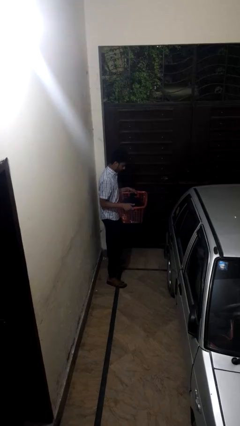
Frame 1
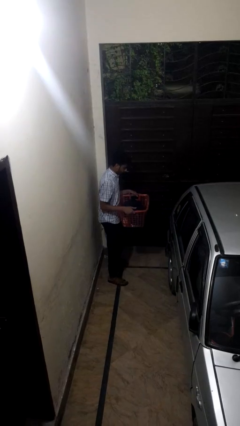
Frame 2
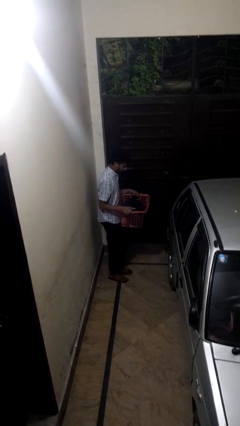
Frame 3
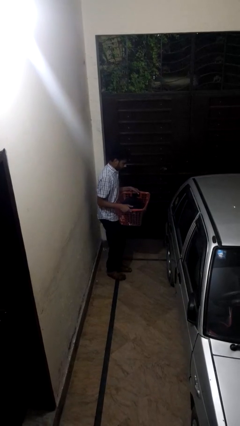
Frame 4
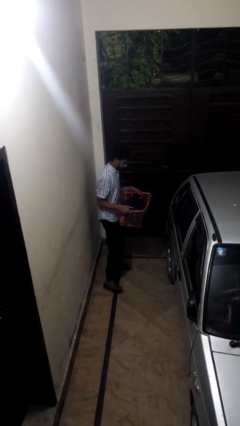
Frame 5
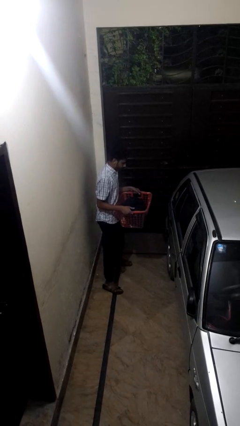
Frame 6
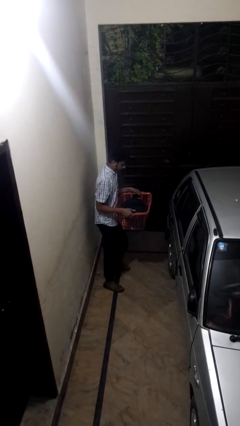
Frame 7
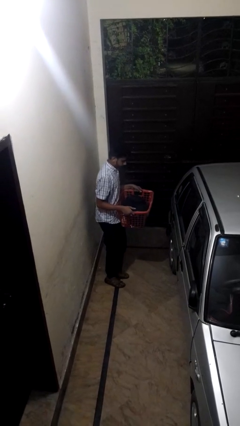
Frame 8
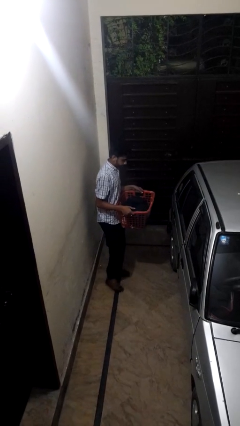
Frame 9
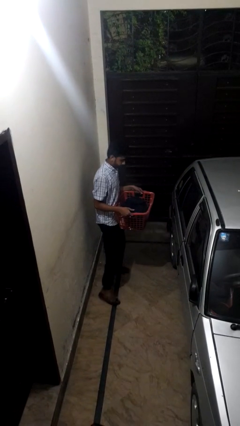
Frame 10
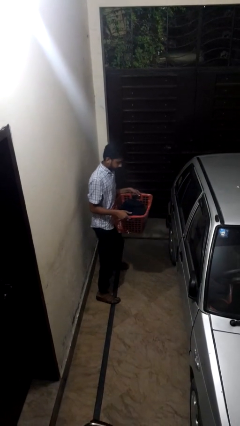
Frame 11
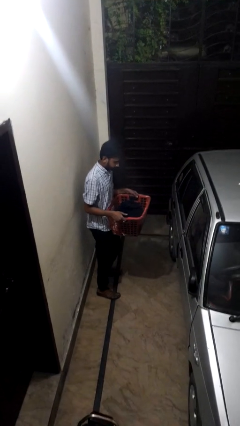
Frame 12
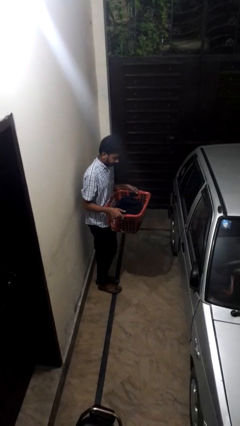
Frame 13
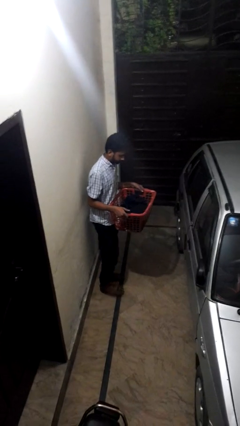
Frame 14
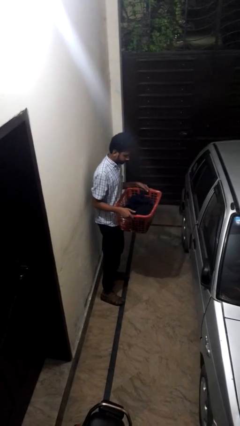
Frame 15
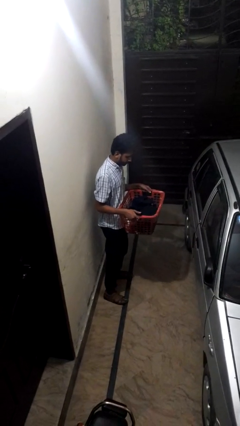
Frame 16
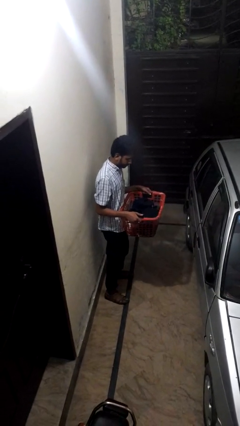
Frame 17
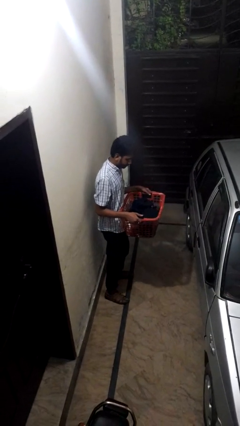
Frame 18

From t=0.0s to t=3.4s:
person carries laundry basket

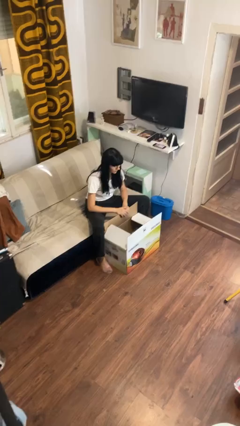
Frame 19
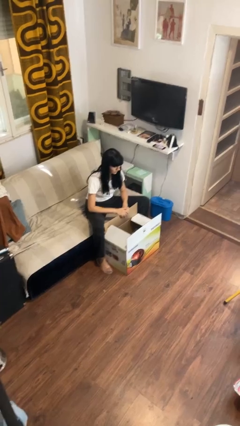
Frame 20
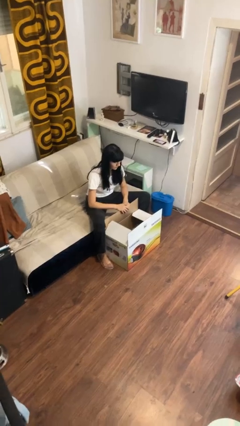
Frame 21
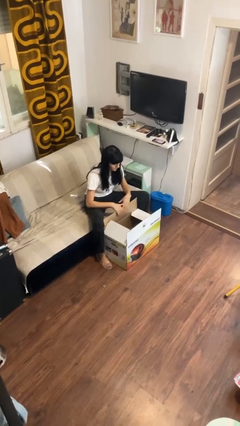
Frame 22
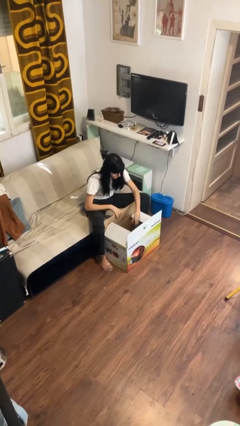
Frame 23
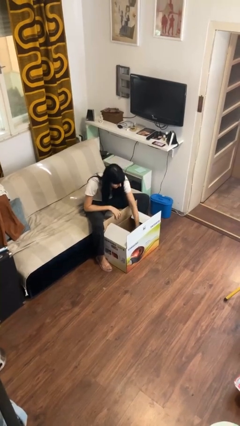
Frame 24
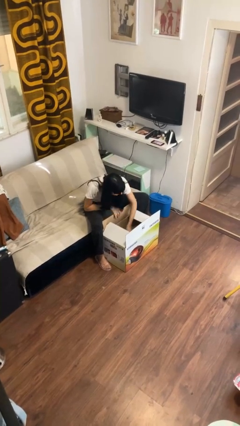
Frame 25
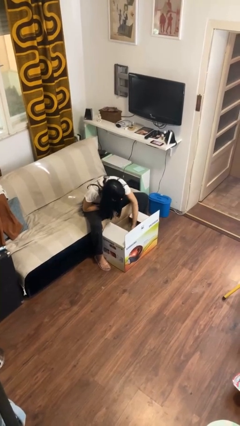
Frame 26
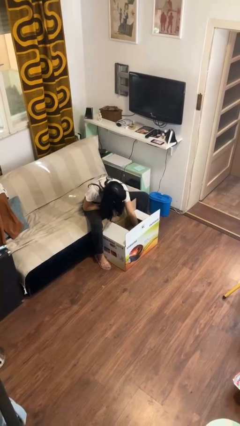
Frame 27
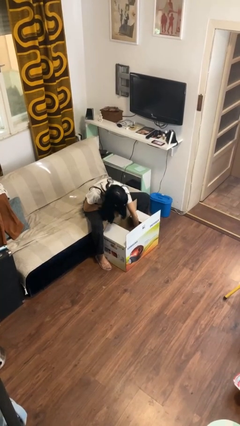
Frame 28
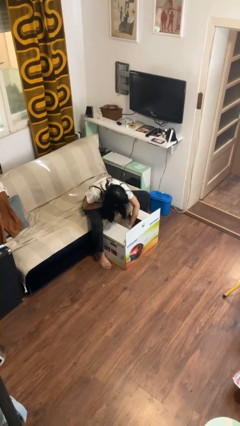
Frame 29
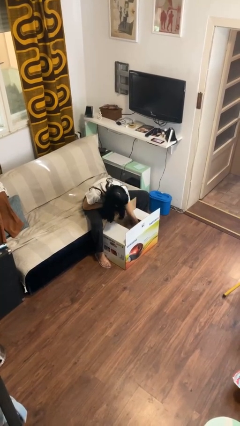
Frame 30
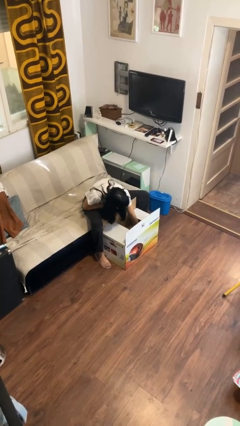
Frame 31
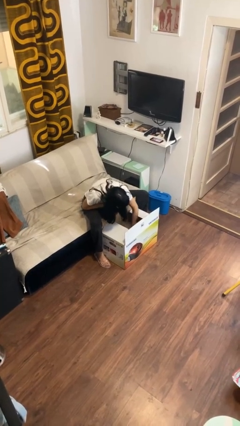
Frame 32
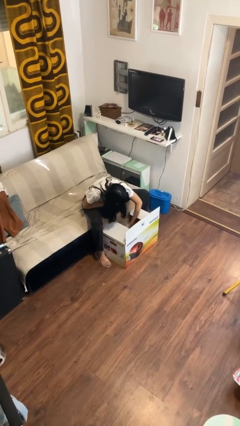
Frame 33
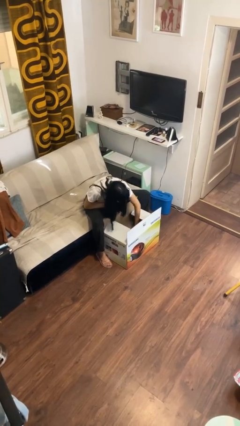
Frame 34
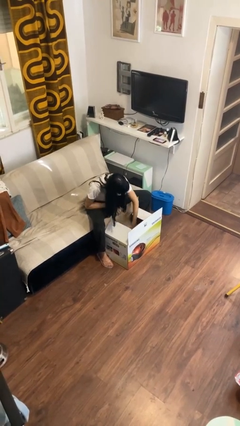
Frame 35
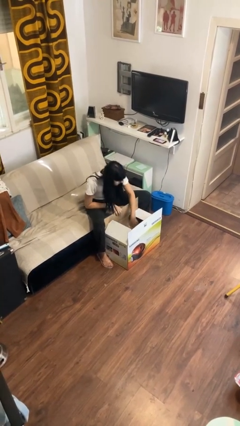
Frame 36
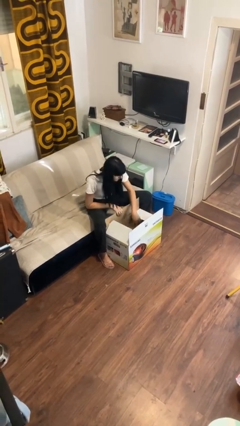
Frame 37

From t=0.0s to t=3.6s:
person searches in box

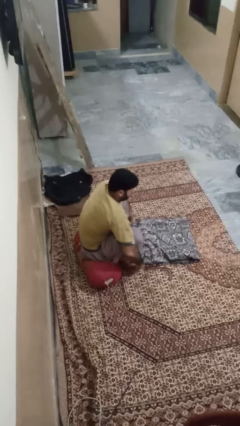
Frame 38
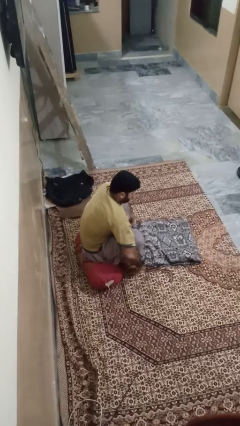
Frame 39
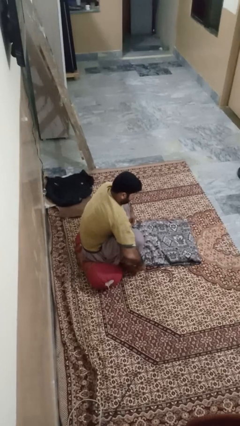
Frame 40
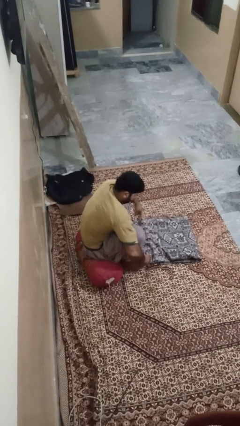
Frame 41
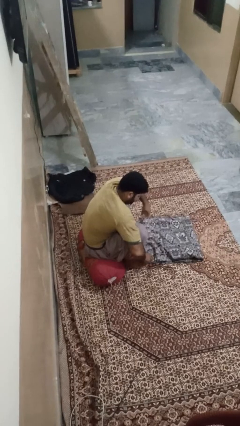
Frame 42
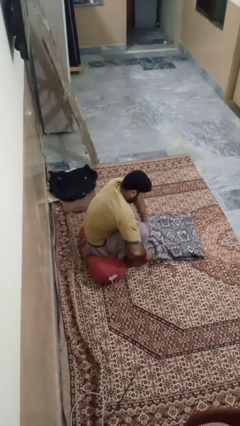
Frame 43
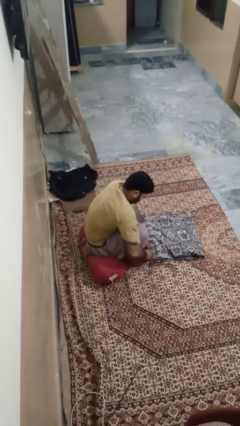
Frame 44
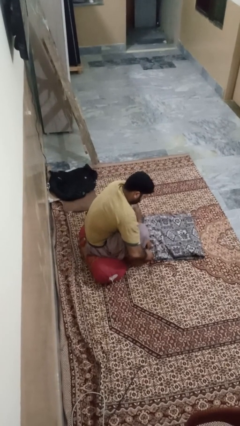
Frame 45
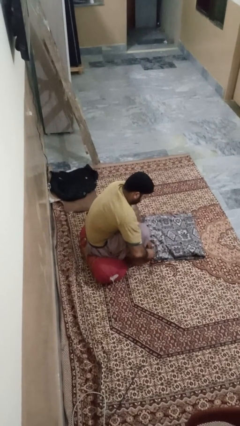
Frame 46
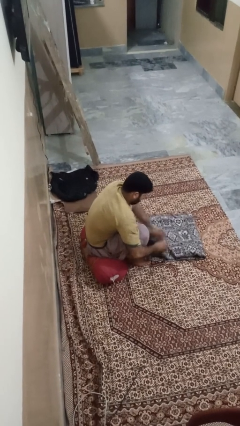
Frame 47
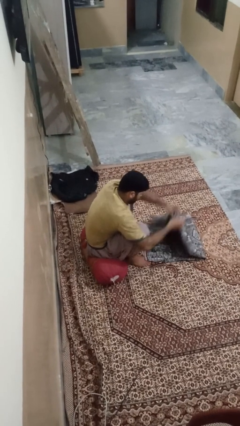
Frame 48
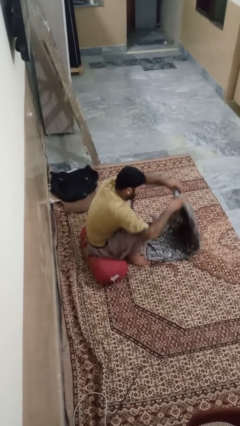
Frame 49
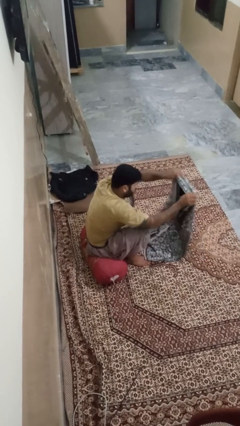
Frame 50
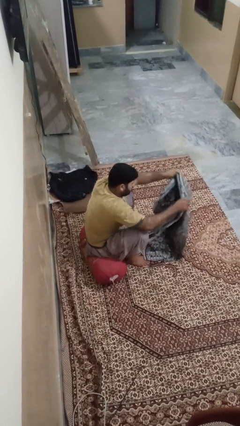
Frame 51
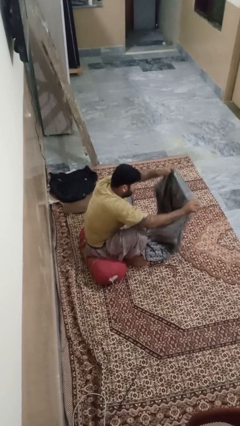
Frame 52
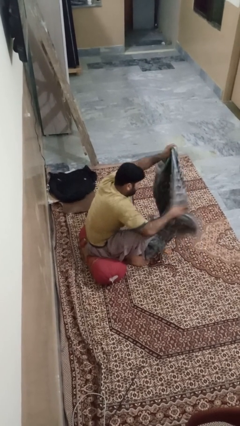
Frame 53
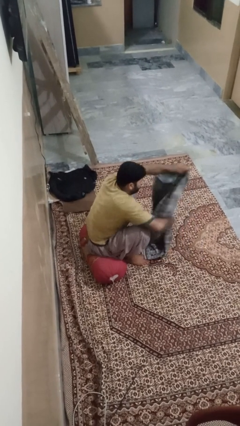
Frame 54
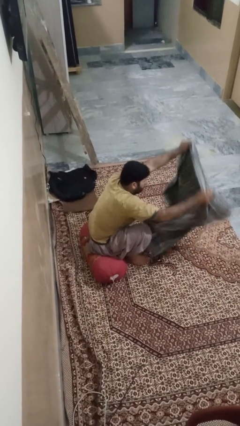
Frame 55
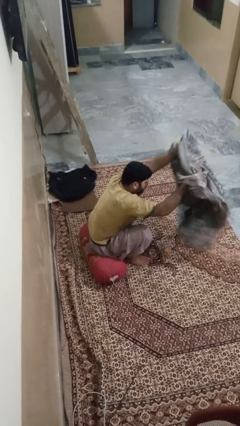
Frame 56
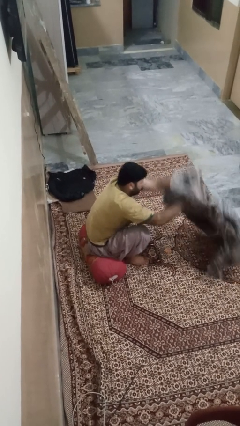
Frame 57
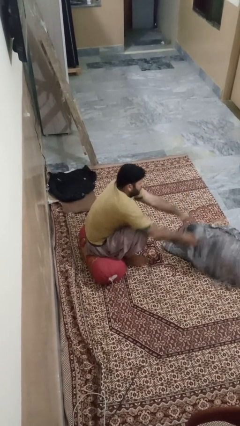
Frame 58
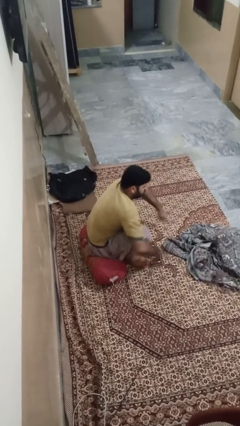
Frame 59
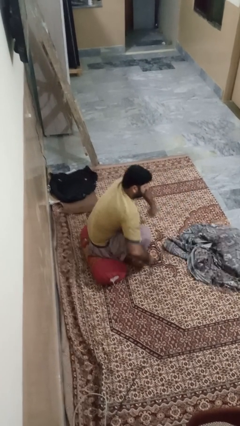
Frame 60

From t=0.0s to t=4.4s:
person unfolds blanket

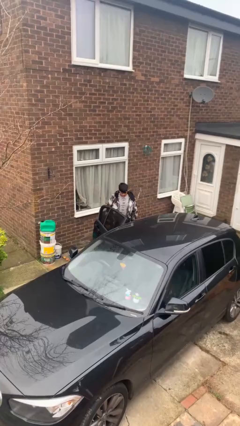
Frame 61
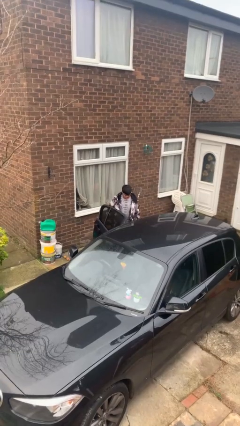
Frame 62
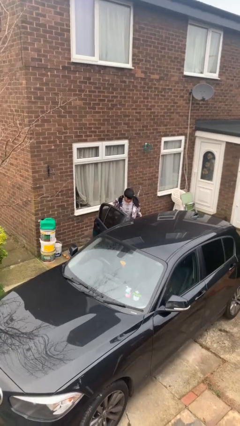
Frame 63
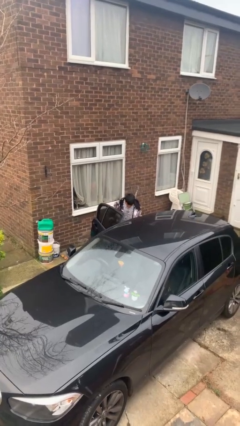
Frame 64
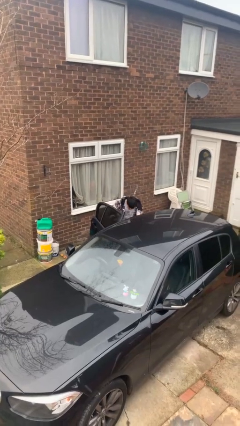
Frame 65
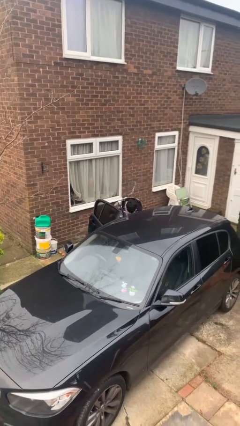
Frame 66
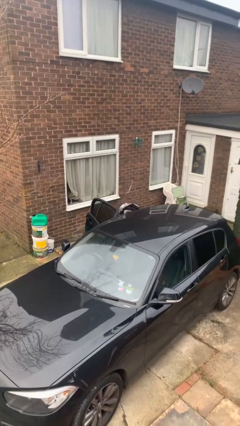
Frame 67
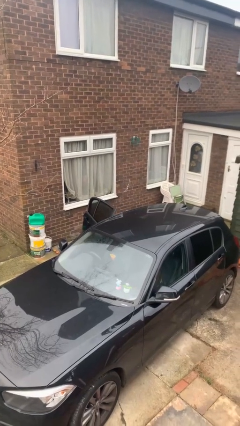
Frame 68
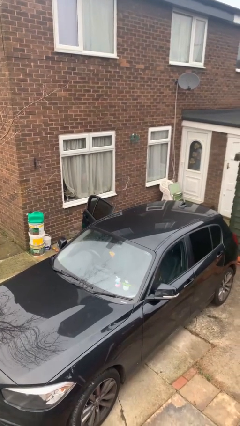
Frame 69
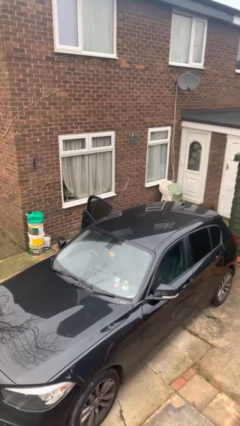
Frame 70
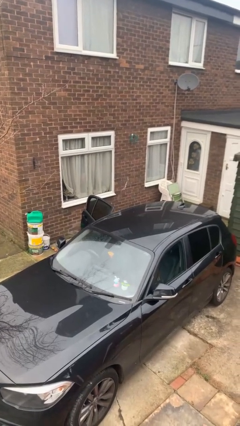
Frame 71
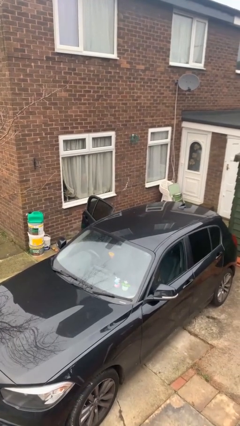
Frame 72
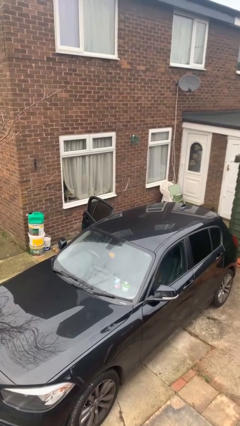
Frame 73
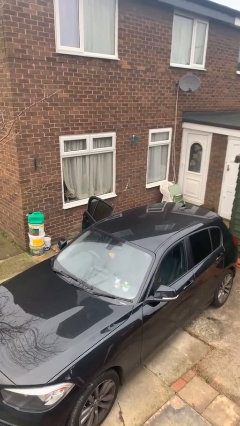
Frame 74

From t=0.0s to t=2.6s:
person enters car

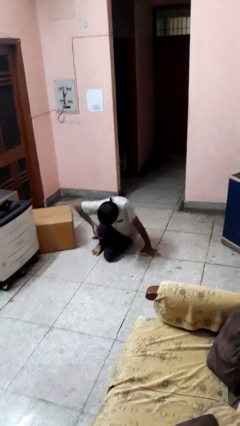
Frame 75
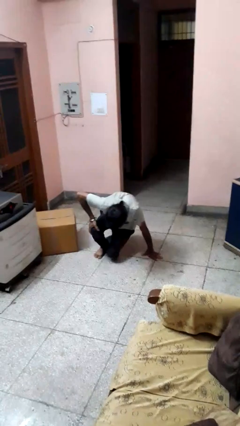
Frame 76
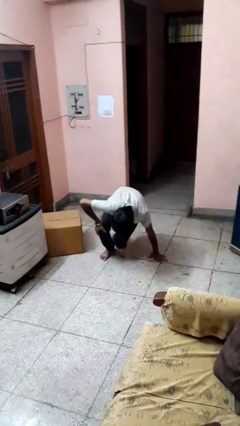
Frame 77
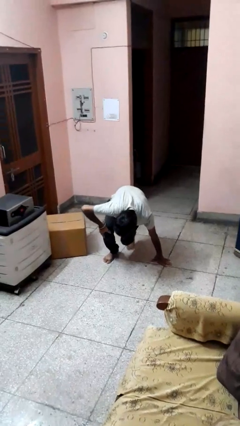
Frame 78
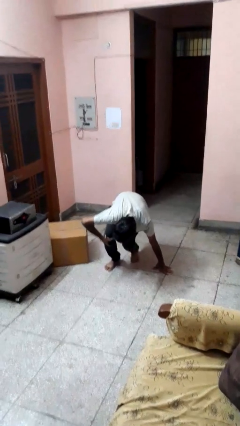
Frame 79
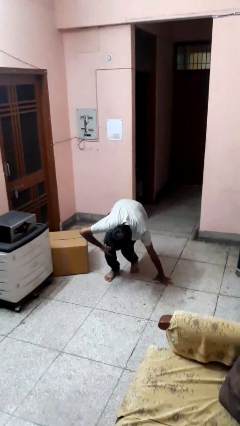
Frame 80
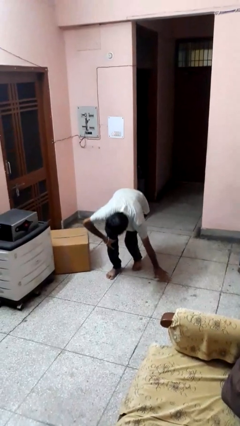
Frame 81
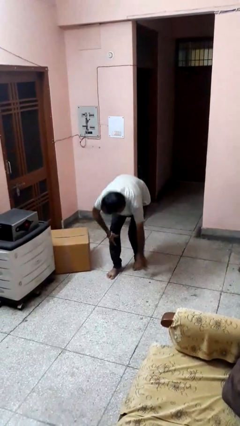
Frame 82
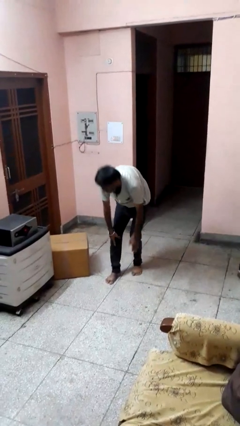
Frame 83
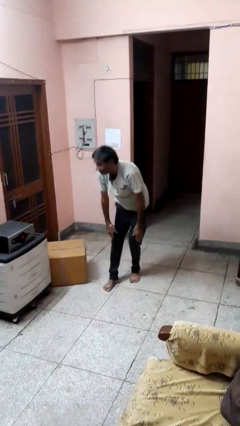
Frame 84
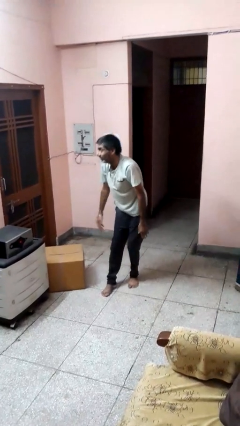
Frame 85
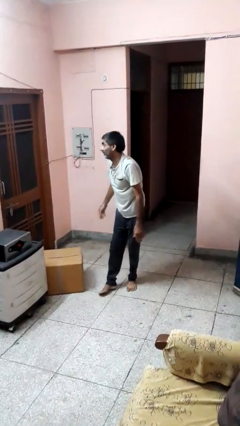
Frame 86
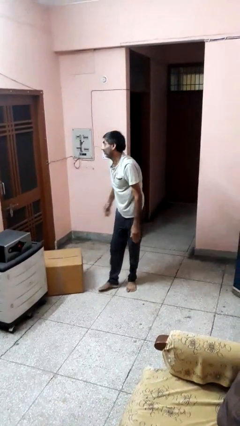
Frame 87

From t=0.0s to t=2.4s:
person stands up from floor

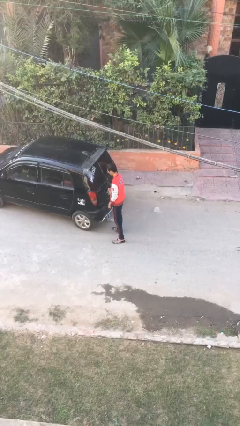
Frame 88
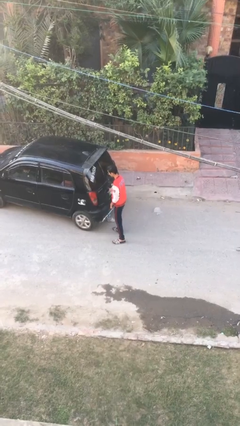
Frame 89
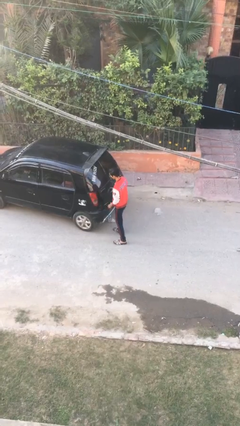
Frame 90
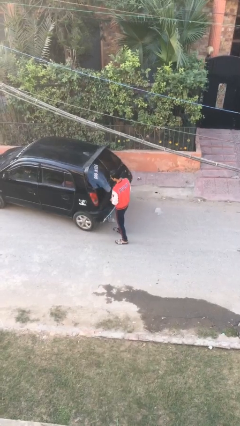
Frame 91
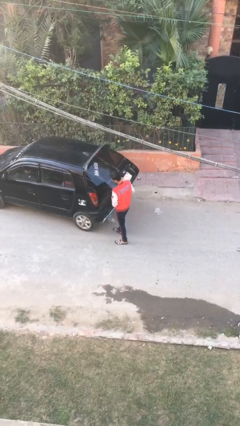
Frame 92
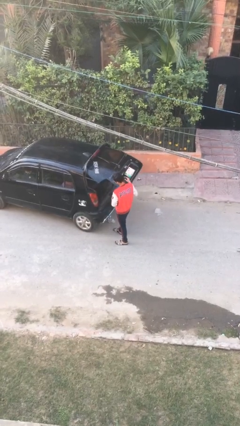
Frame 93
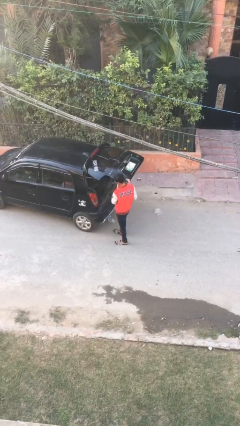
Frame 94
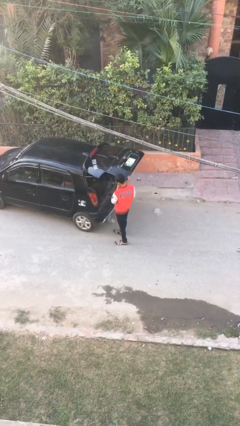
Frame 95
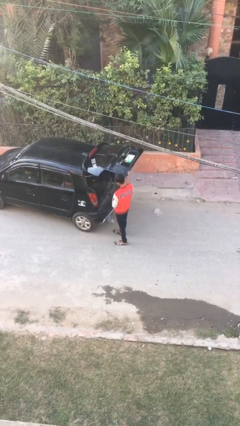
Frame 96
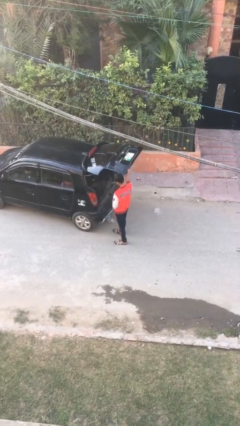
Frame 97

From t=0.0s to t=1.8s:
person opens car trunk
